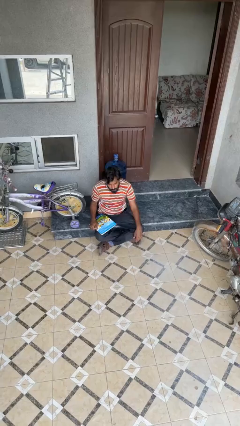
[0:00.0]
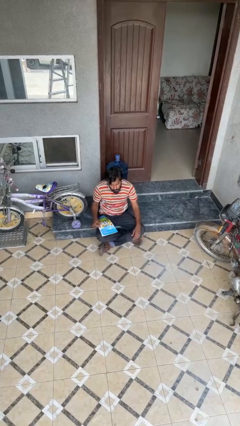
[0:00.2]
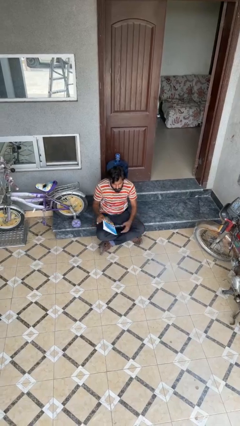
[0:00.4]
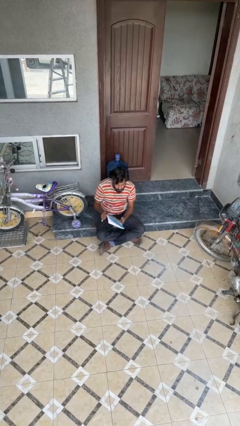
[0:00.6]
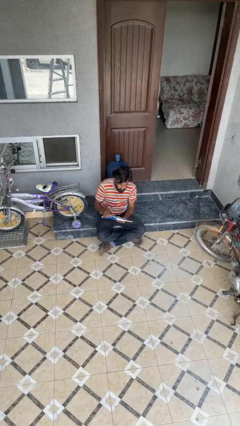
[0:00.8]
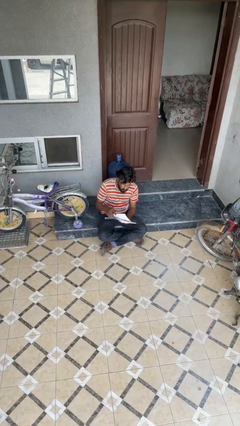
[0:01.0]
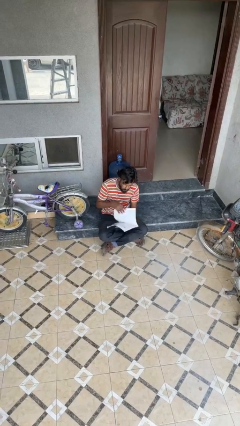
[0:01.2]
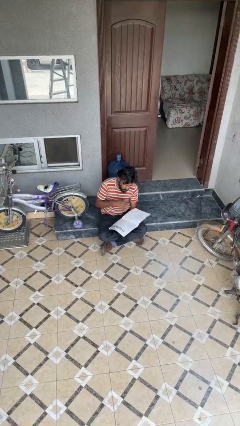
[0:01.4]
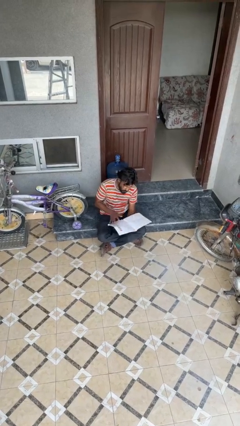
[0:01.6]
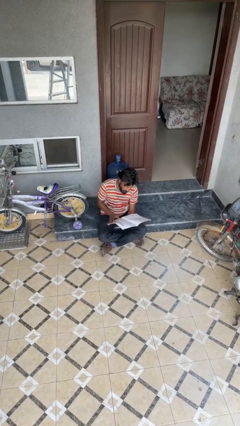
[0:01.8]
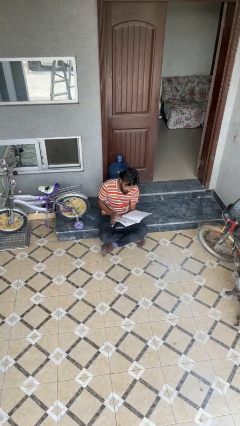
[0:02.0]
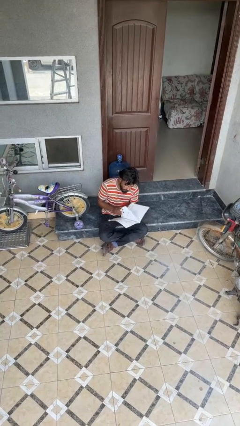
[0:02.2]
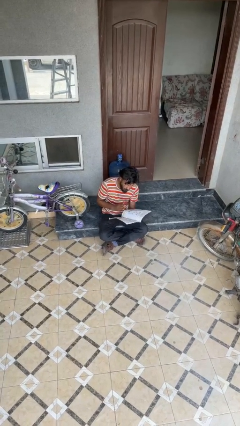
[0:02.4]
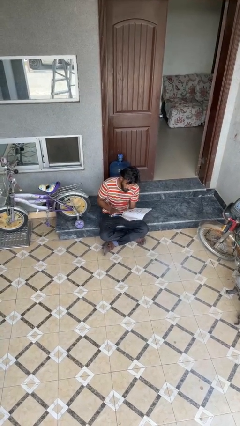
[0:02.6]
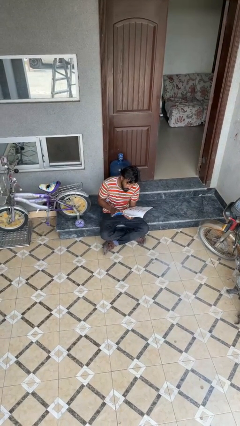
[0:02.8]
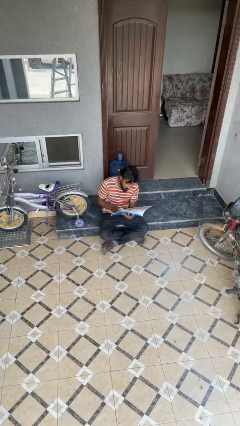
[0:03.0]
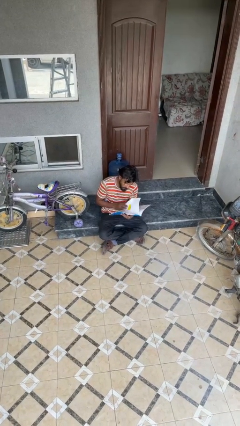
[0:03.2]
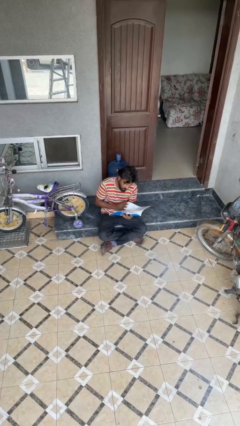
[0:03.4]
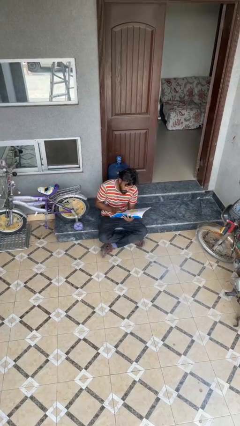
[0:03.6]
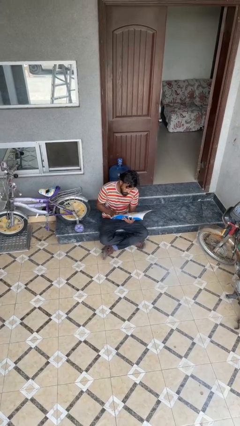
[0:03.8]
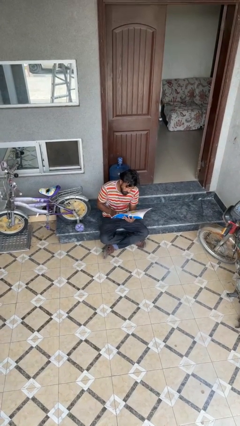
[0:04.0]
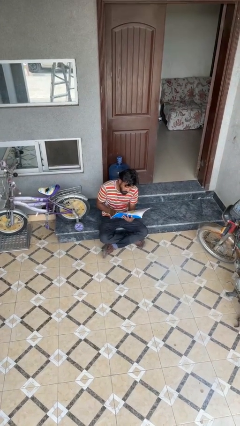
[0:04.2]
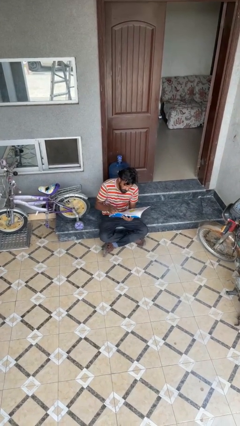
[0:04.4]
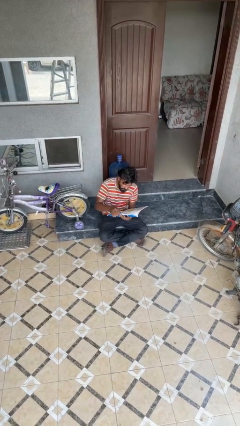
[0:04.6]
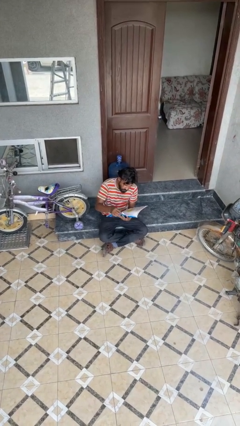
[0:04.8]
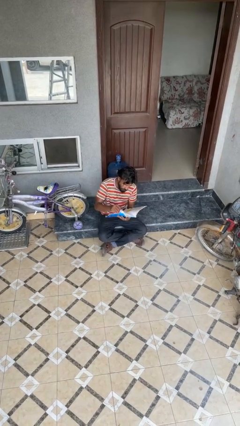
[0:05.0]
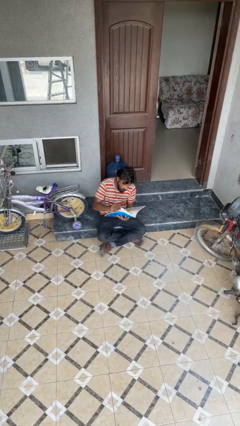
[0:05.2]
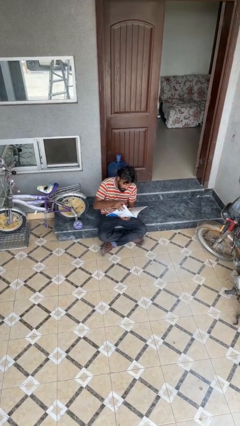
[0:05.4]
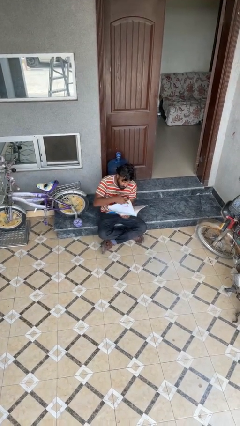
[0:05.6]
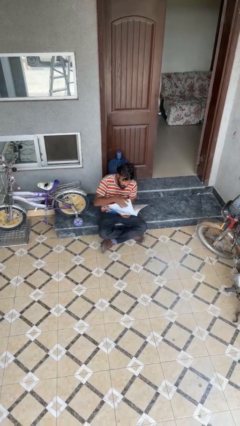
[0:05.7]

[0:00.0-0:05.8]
person reads book

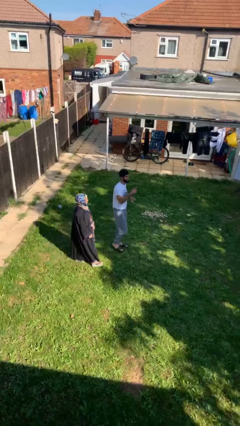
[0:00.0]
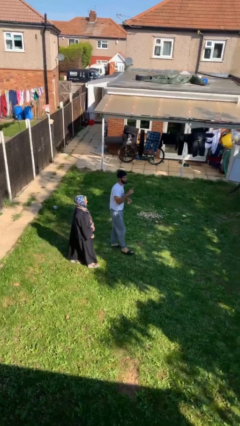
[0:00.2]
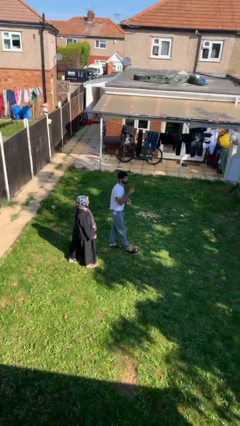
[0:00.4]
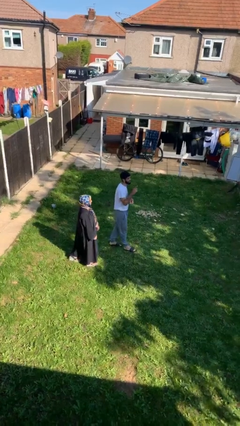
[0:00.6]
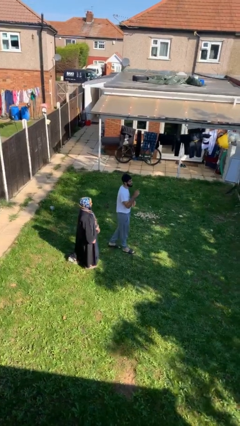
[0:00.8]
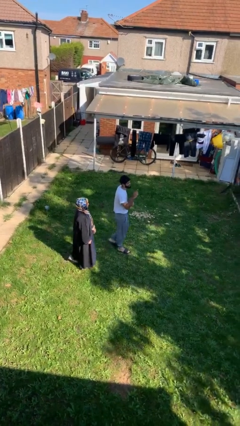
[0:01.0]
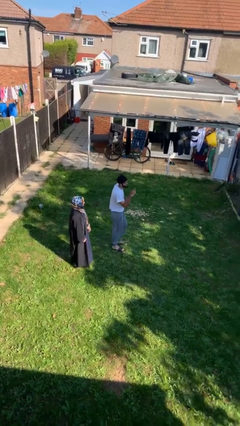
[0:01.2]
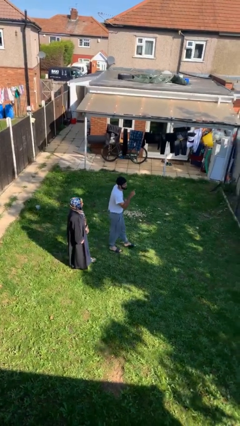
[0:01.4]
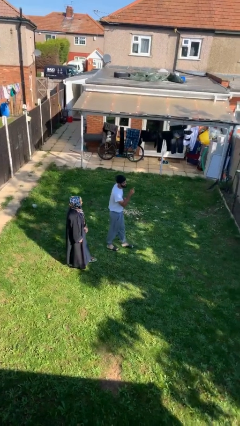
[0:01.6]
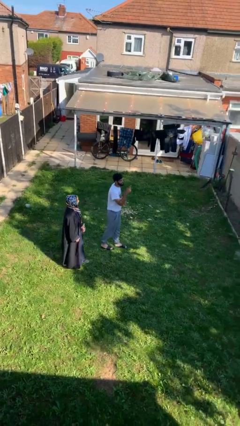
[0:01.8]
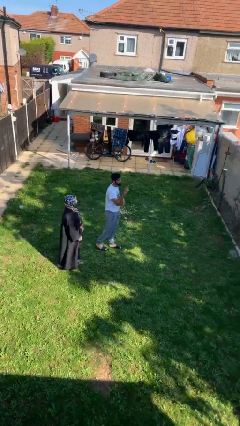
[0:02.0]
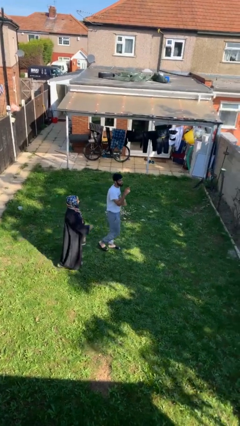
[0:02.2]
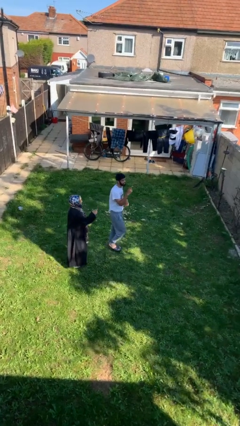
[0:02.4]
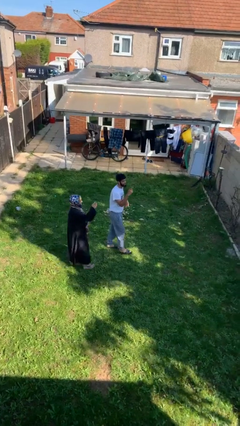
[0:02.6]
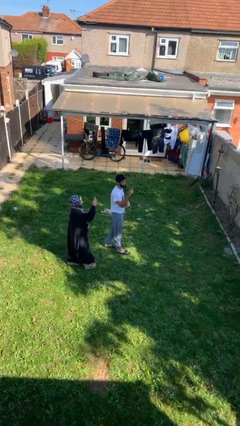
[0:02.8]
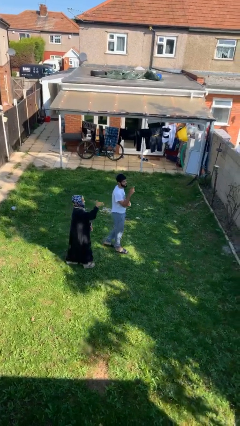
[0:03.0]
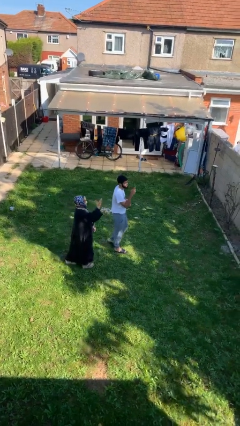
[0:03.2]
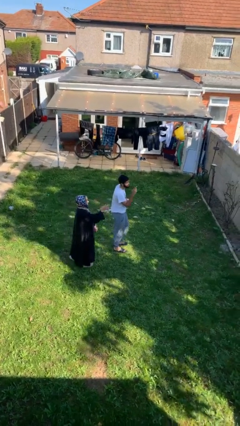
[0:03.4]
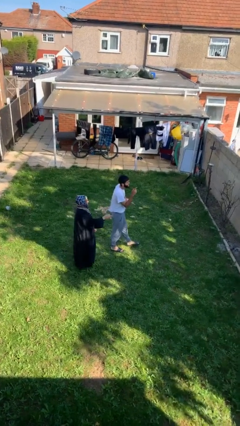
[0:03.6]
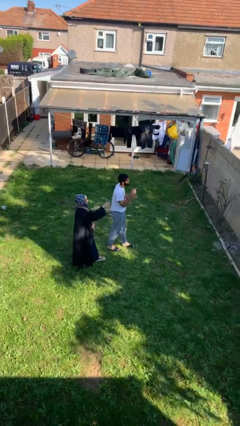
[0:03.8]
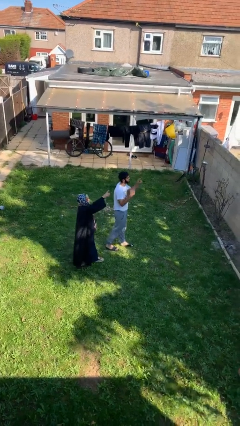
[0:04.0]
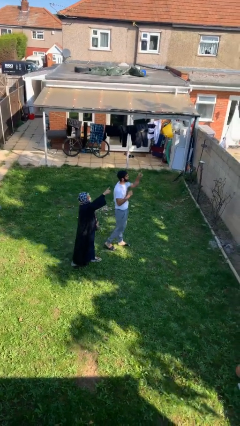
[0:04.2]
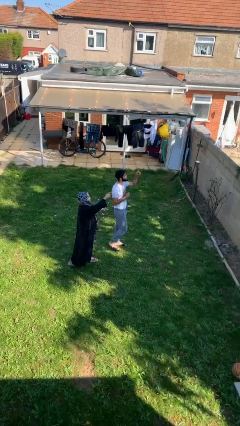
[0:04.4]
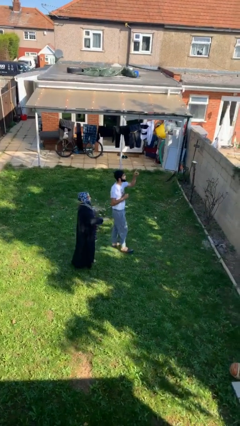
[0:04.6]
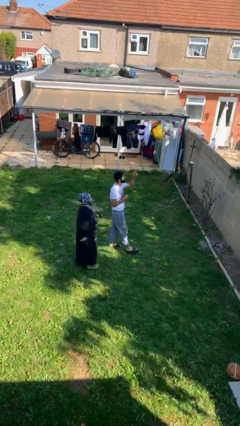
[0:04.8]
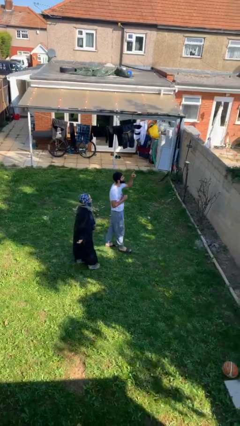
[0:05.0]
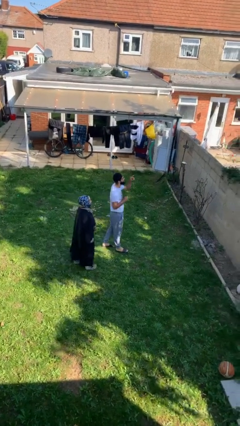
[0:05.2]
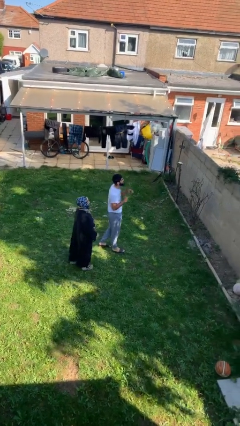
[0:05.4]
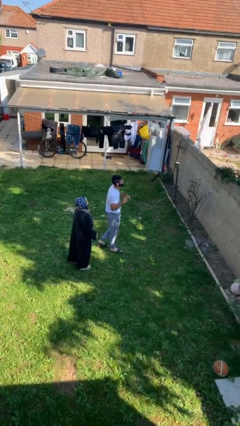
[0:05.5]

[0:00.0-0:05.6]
person talks to person

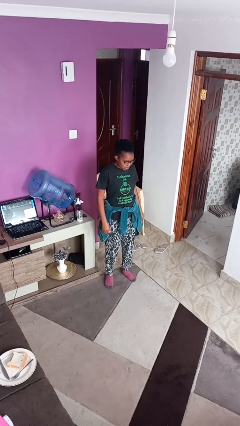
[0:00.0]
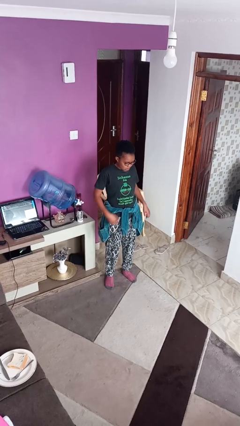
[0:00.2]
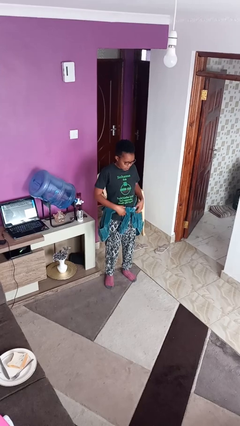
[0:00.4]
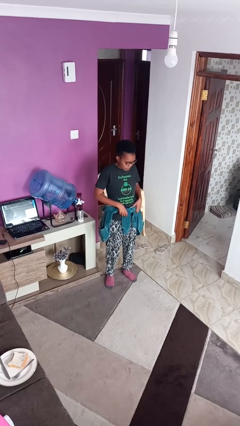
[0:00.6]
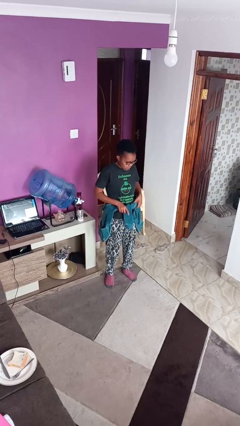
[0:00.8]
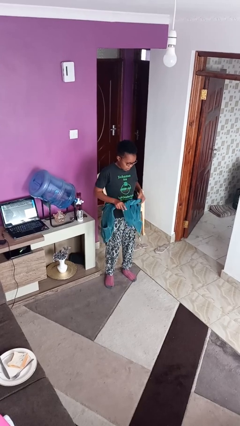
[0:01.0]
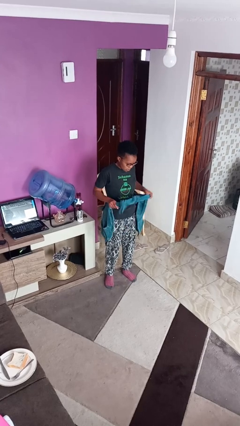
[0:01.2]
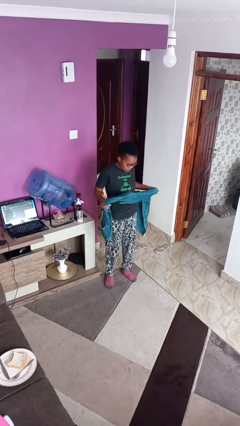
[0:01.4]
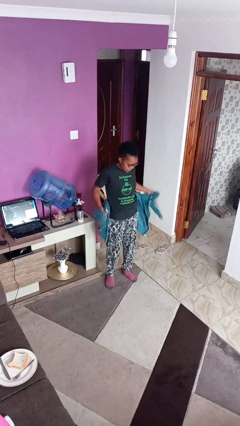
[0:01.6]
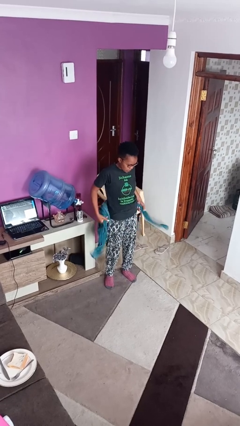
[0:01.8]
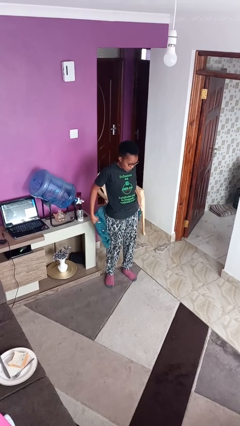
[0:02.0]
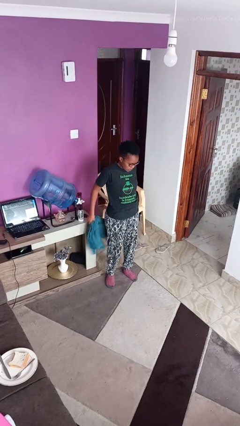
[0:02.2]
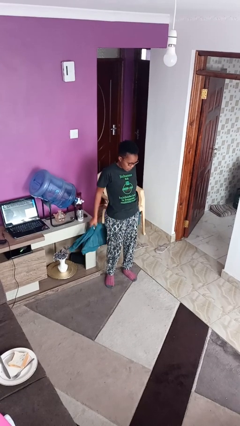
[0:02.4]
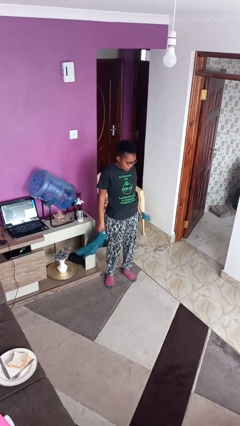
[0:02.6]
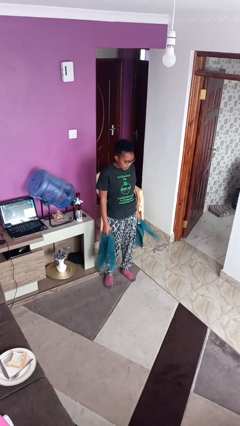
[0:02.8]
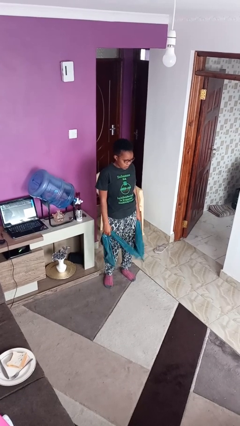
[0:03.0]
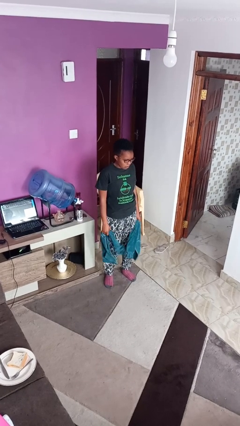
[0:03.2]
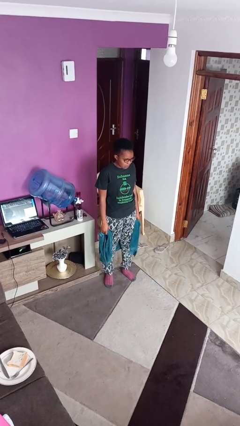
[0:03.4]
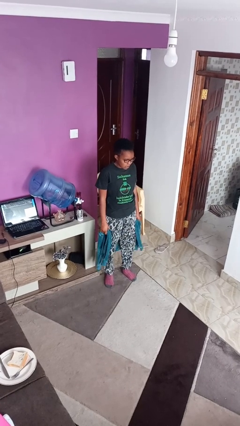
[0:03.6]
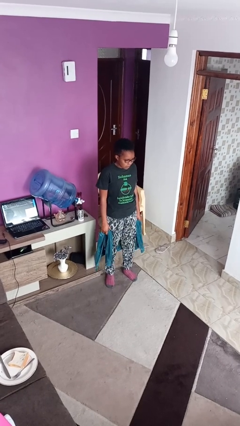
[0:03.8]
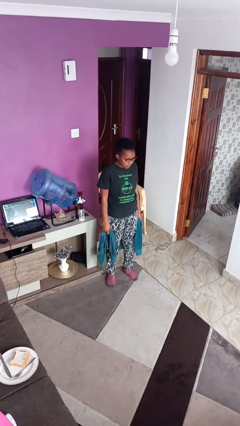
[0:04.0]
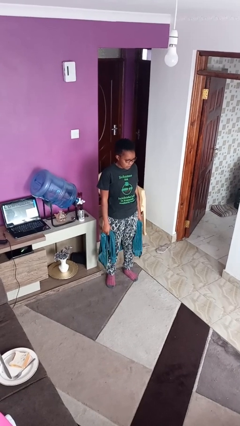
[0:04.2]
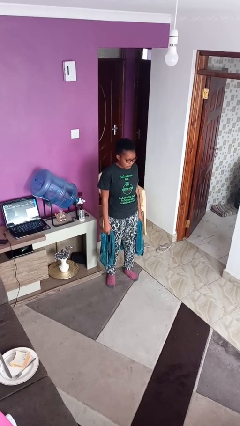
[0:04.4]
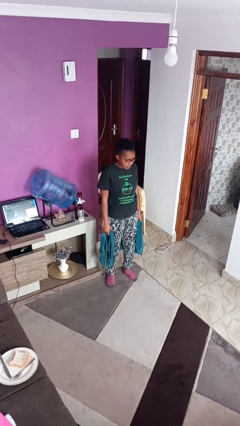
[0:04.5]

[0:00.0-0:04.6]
person unties jacket around waist

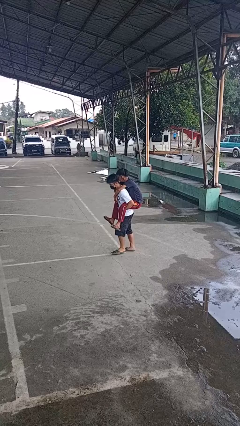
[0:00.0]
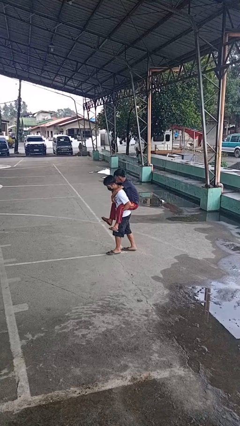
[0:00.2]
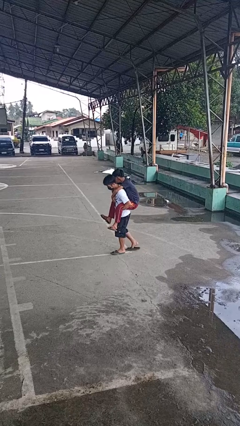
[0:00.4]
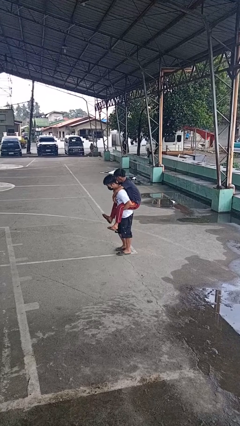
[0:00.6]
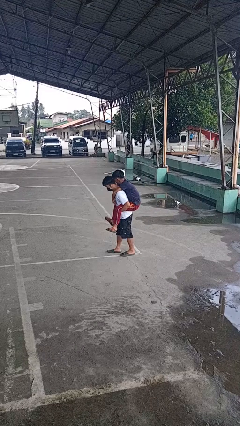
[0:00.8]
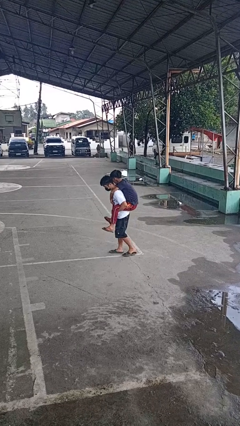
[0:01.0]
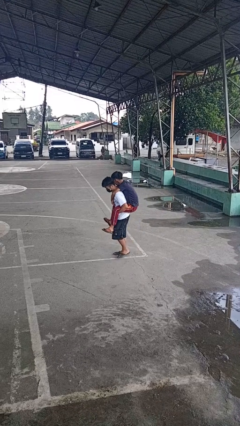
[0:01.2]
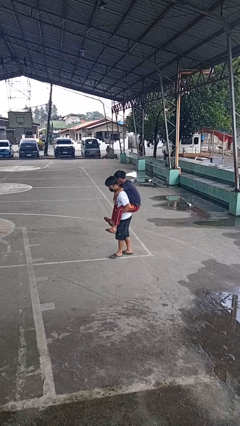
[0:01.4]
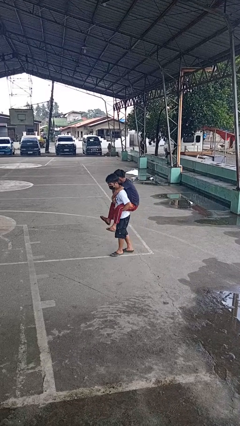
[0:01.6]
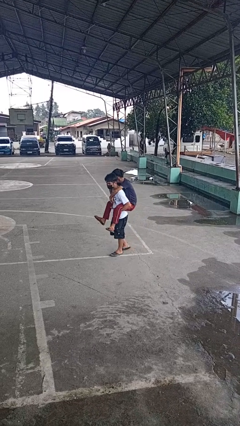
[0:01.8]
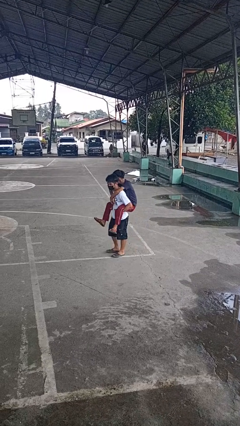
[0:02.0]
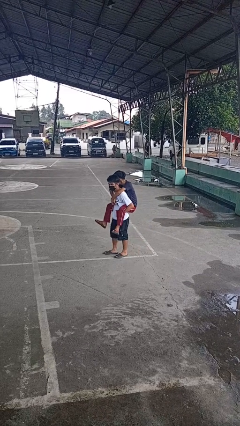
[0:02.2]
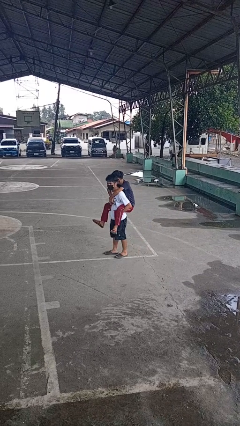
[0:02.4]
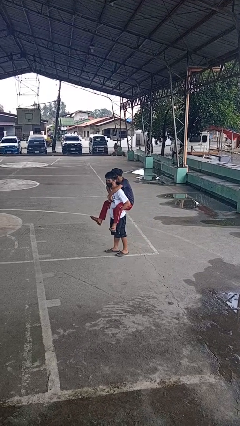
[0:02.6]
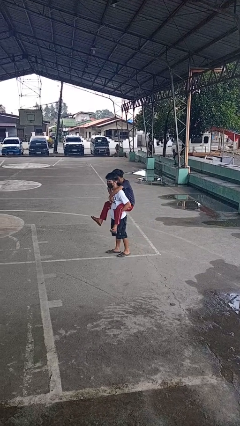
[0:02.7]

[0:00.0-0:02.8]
person carries person on shoulders
